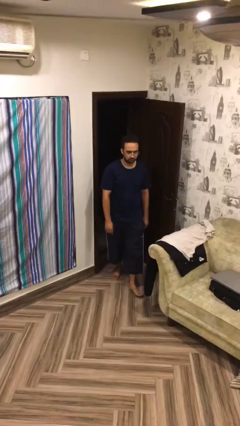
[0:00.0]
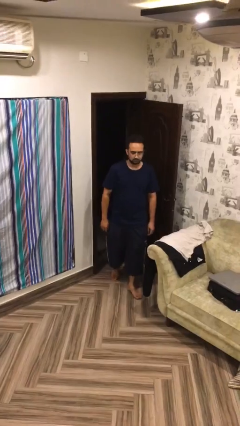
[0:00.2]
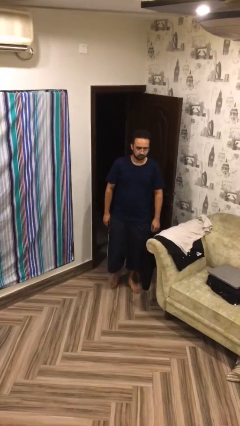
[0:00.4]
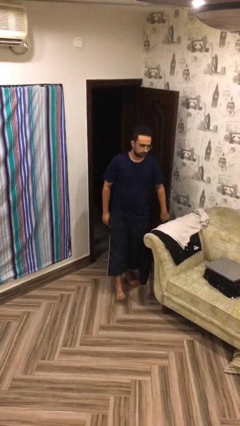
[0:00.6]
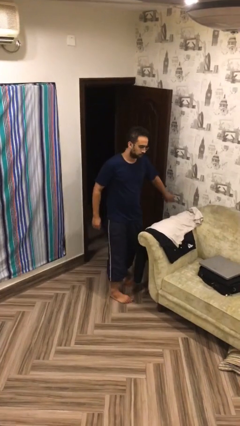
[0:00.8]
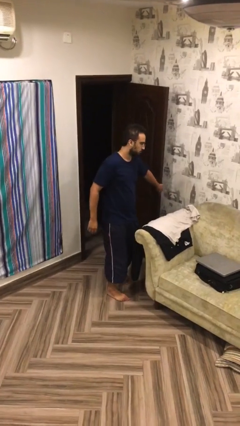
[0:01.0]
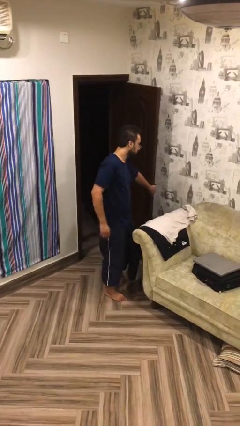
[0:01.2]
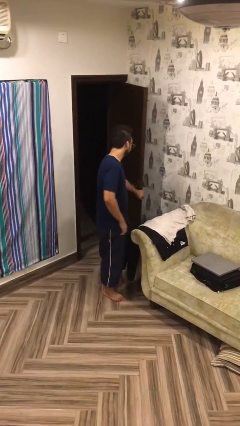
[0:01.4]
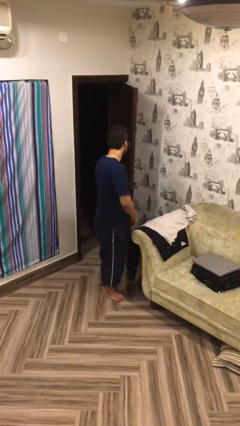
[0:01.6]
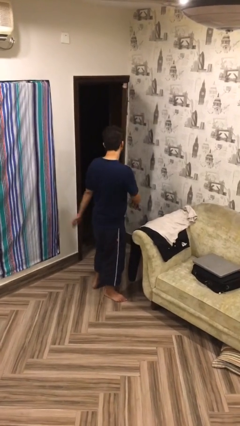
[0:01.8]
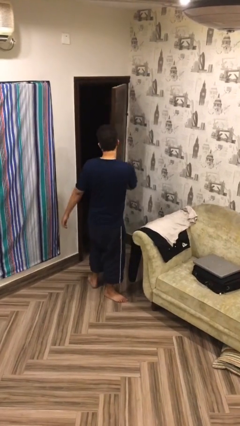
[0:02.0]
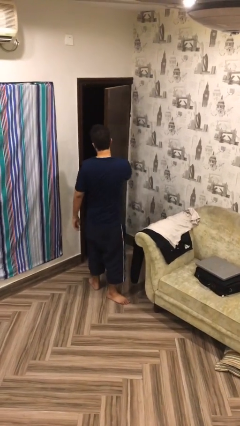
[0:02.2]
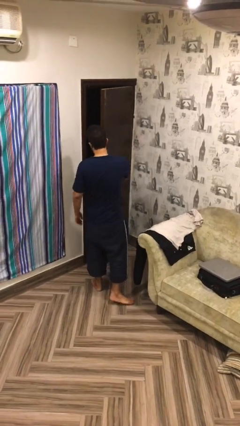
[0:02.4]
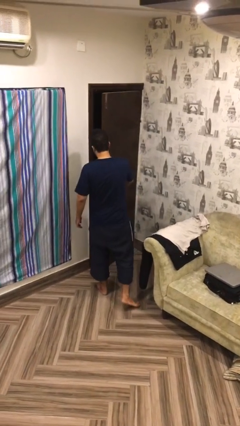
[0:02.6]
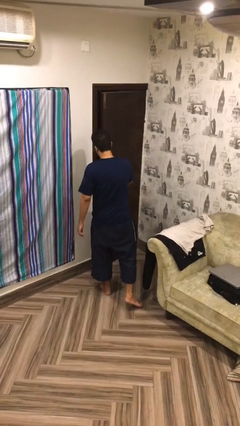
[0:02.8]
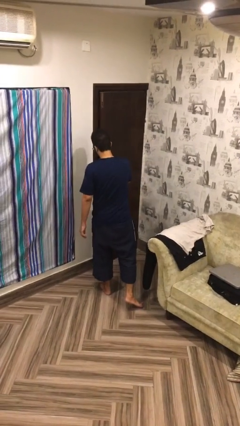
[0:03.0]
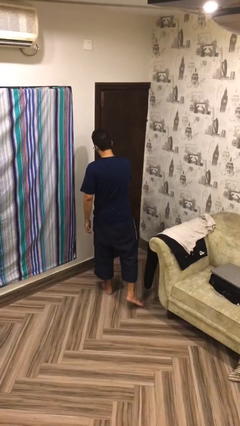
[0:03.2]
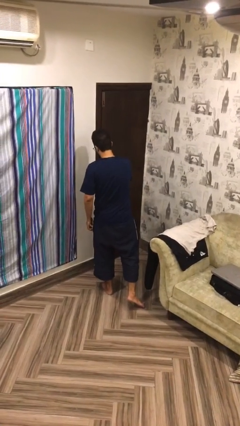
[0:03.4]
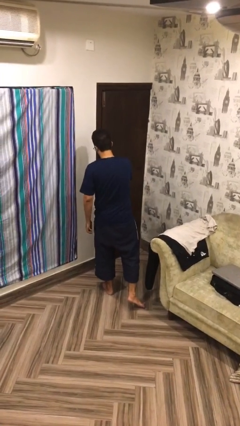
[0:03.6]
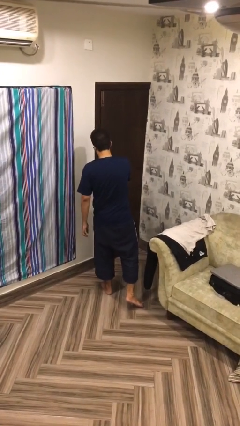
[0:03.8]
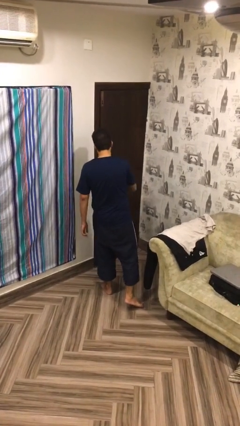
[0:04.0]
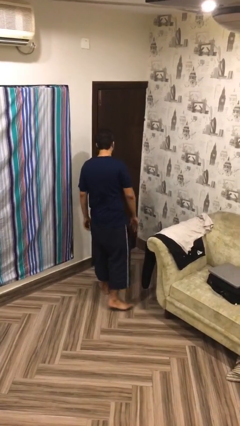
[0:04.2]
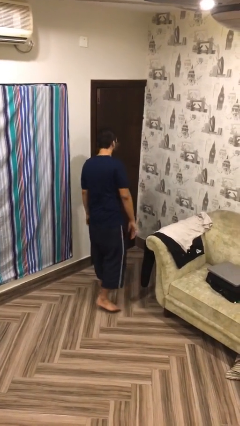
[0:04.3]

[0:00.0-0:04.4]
person closes facility door

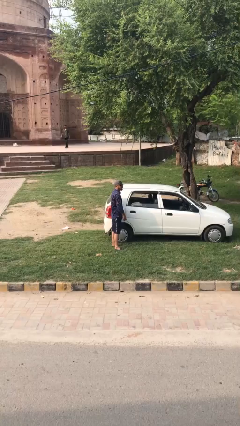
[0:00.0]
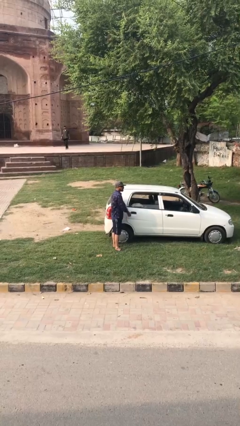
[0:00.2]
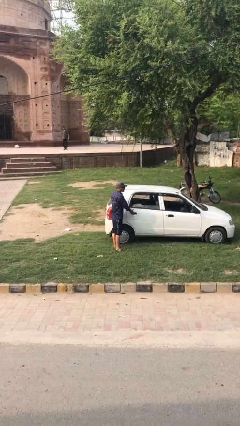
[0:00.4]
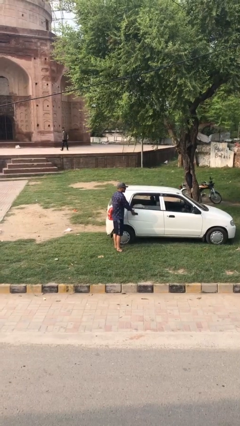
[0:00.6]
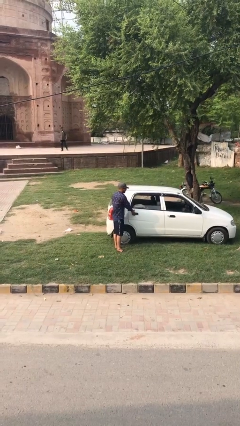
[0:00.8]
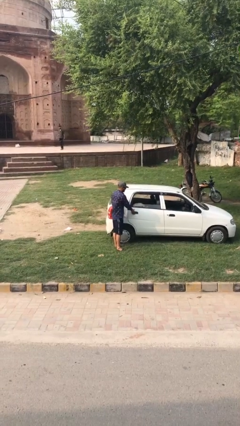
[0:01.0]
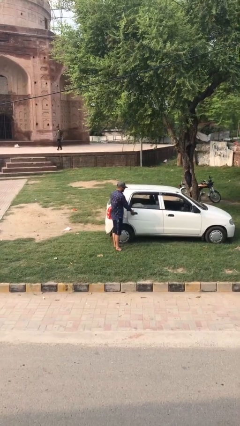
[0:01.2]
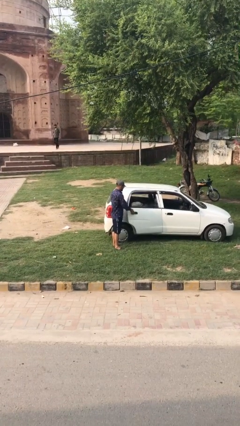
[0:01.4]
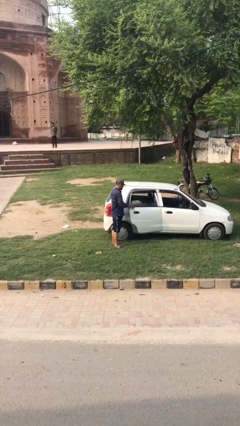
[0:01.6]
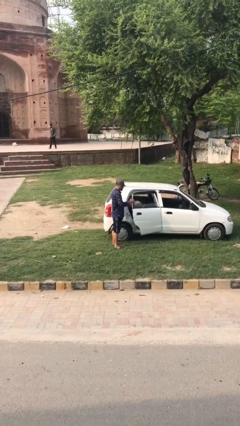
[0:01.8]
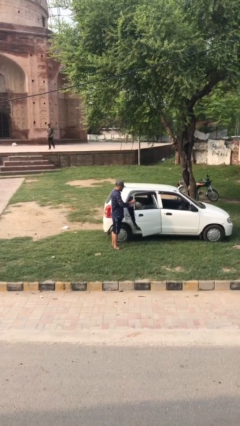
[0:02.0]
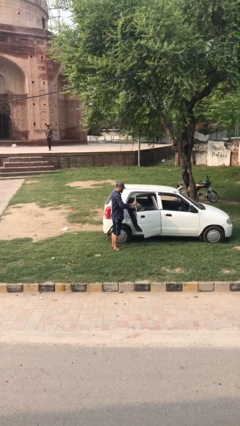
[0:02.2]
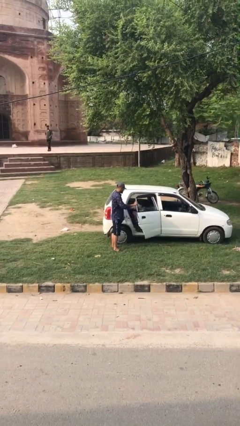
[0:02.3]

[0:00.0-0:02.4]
person opens car door

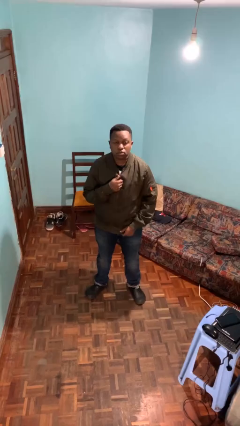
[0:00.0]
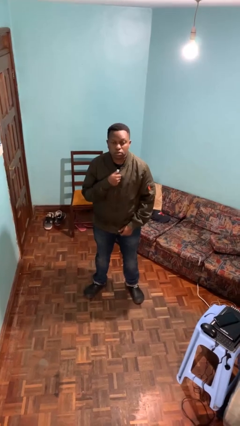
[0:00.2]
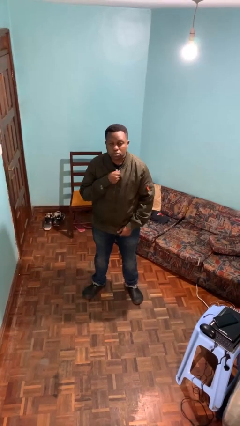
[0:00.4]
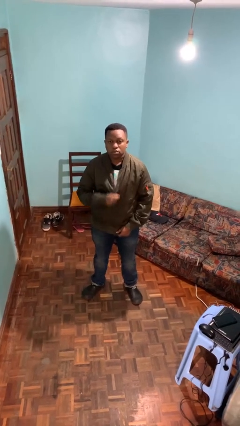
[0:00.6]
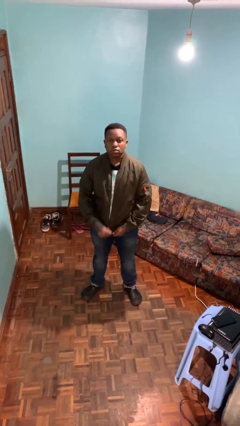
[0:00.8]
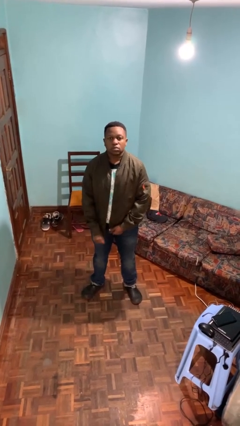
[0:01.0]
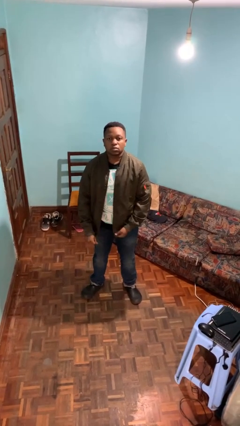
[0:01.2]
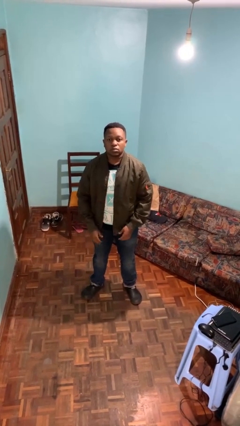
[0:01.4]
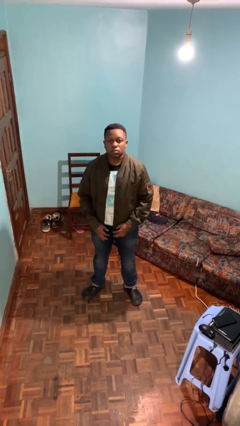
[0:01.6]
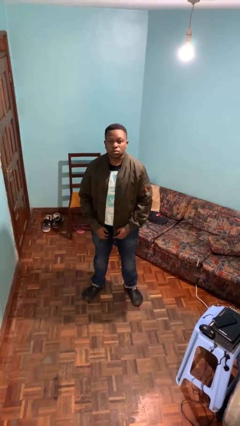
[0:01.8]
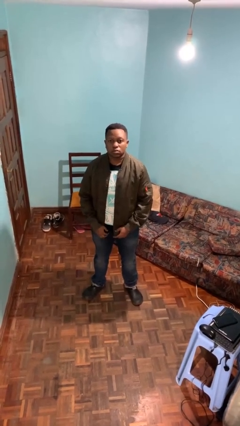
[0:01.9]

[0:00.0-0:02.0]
person unzips jacket

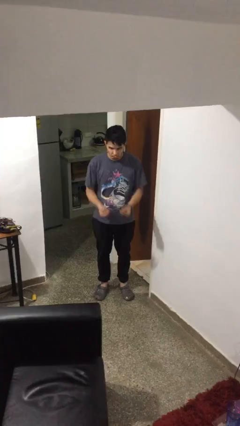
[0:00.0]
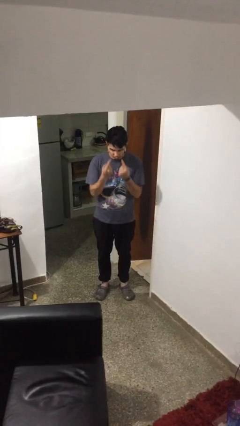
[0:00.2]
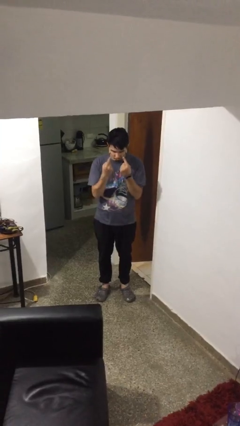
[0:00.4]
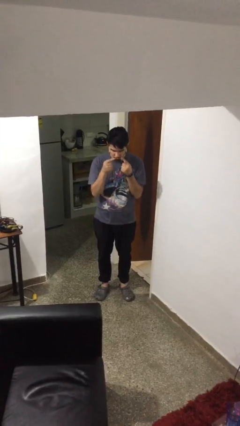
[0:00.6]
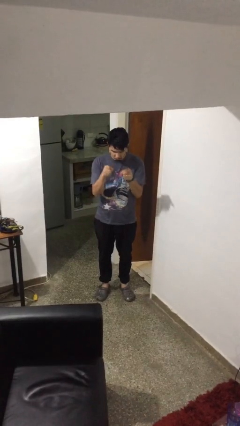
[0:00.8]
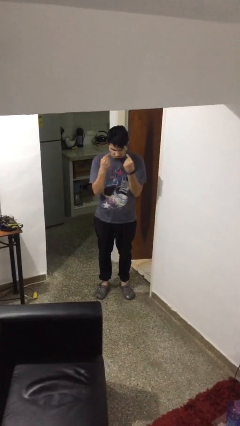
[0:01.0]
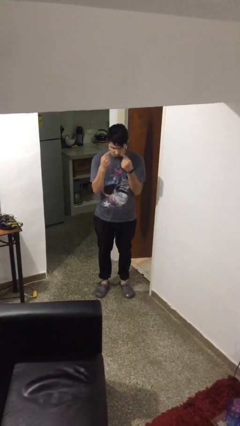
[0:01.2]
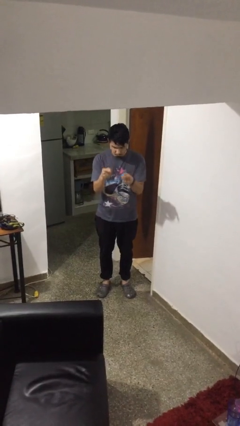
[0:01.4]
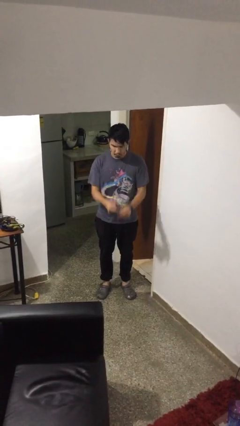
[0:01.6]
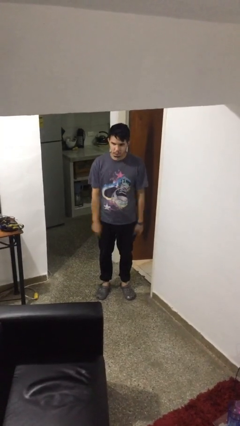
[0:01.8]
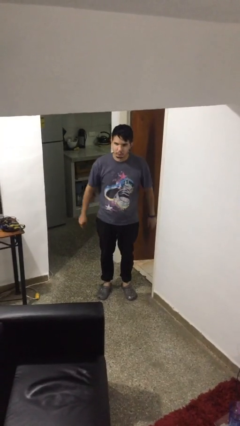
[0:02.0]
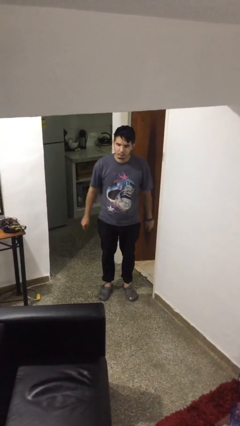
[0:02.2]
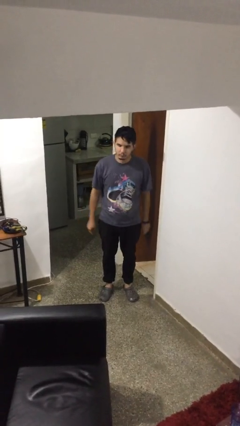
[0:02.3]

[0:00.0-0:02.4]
person gestures watch closely

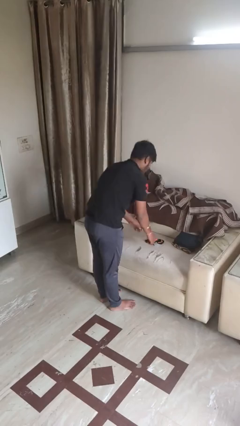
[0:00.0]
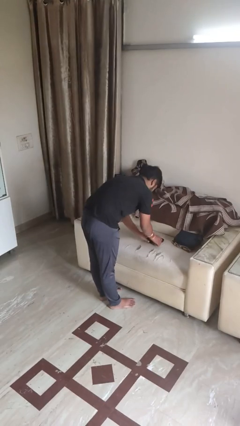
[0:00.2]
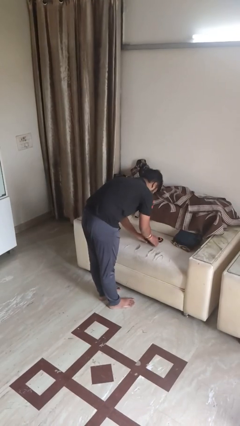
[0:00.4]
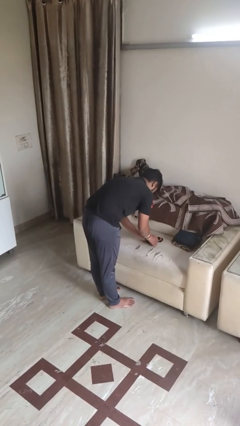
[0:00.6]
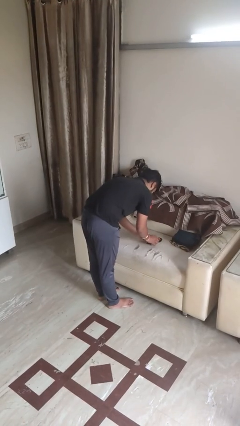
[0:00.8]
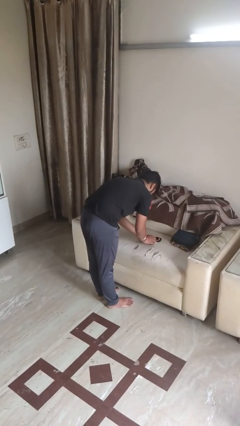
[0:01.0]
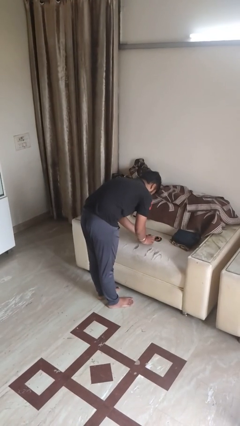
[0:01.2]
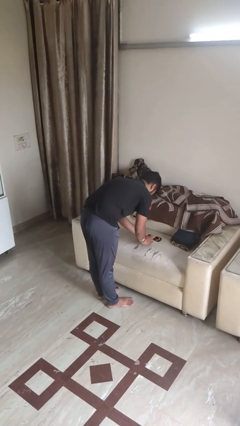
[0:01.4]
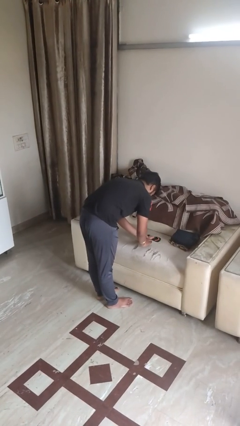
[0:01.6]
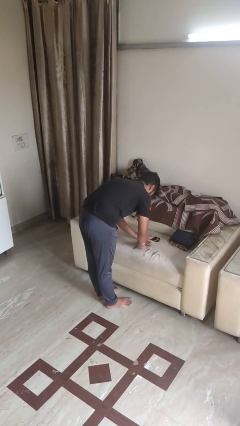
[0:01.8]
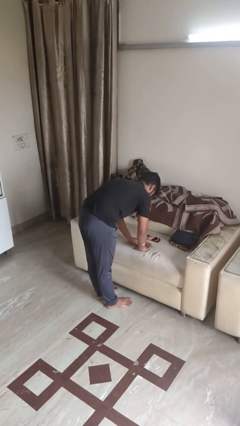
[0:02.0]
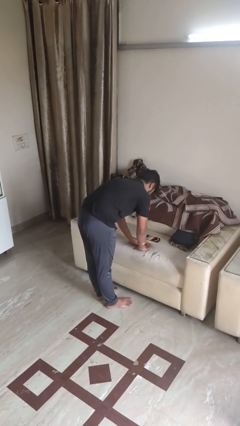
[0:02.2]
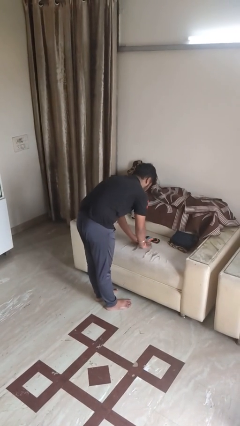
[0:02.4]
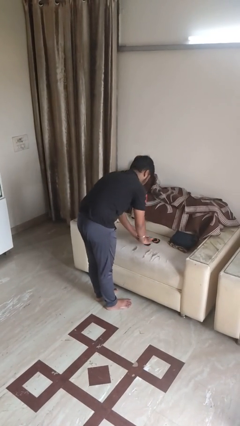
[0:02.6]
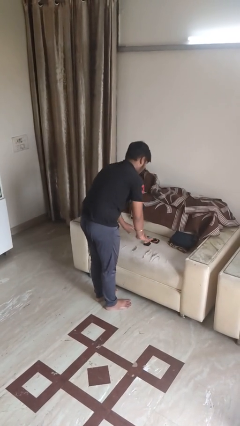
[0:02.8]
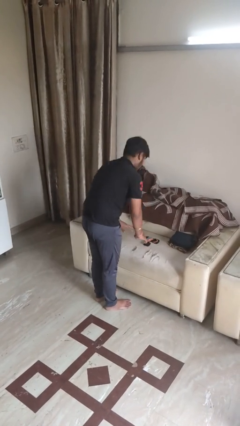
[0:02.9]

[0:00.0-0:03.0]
person folds socks

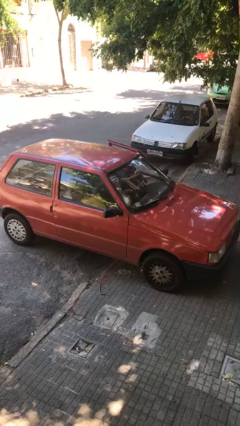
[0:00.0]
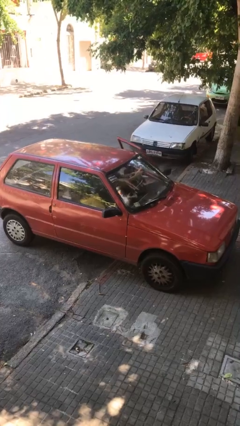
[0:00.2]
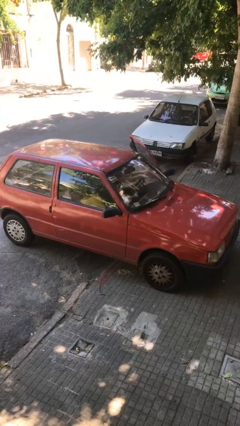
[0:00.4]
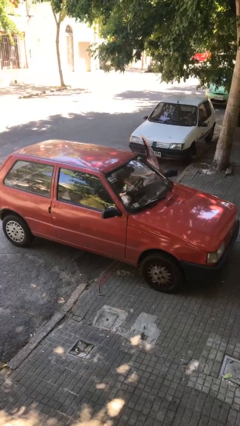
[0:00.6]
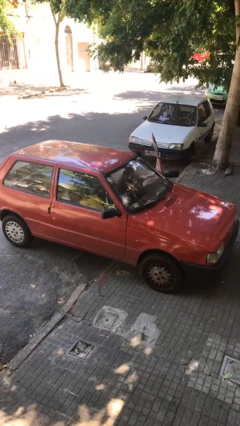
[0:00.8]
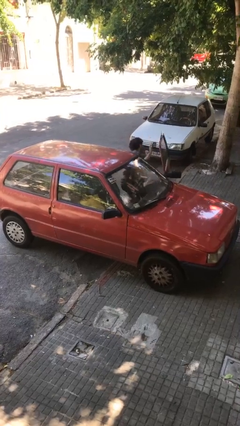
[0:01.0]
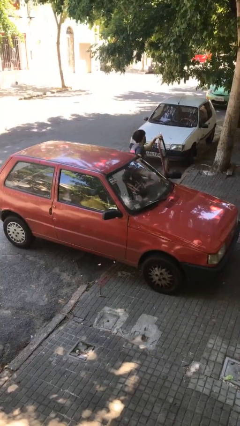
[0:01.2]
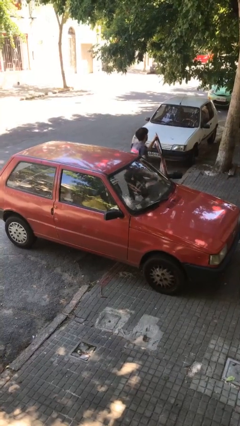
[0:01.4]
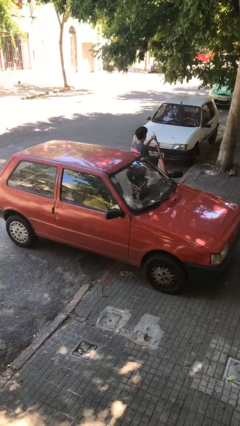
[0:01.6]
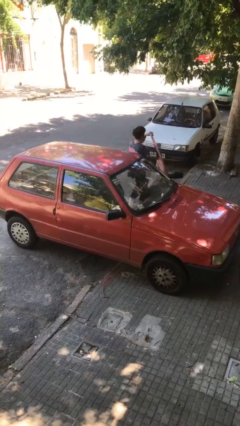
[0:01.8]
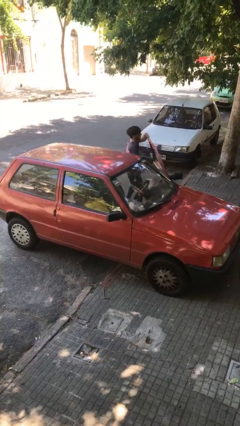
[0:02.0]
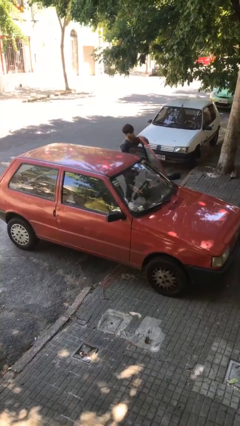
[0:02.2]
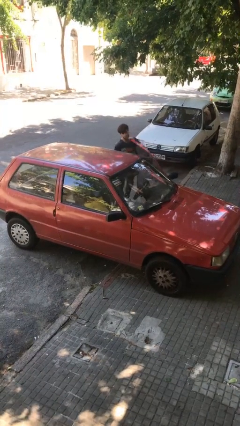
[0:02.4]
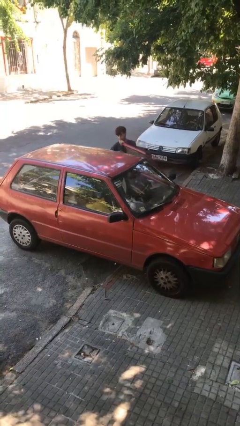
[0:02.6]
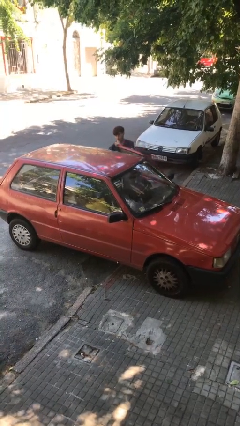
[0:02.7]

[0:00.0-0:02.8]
car drops off person

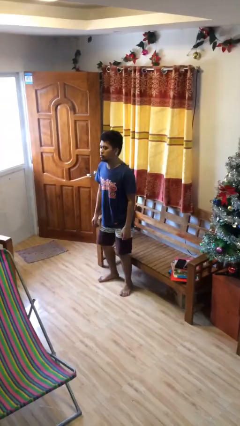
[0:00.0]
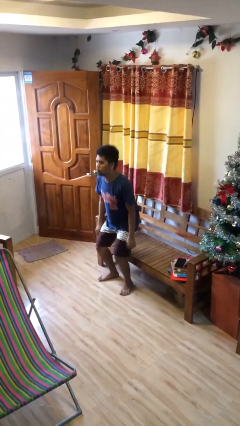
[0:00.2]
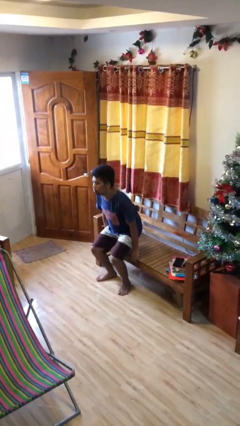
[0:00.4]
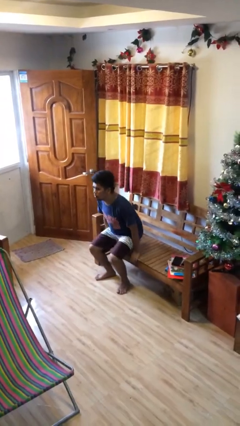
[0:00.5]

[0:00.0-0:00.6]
person sits down
